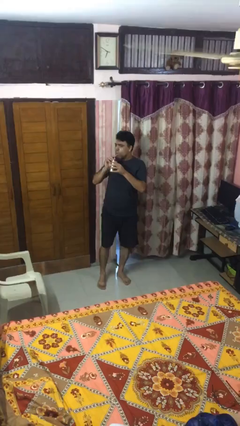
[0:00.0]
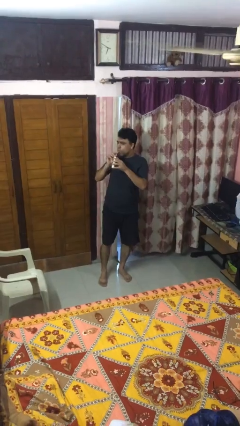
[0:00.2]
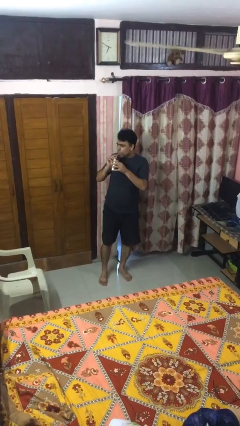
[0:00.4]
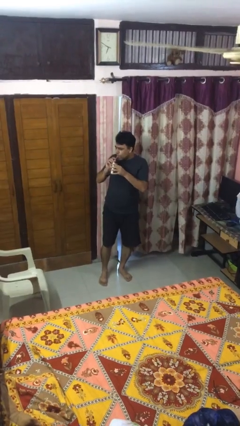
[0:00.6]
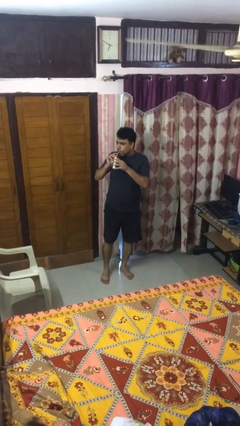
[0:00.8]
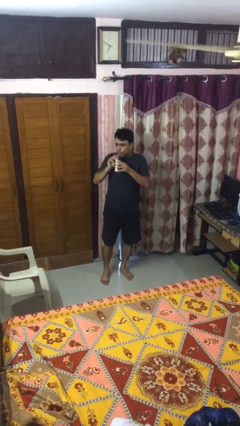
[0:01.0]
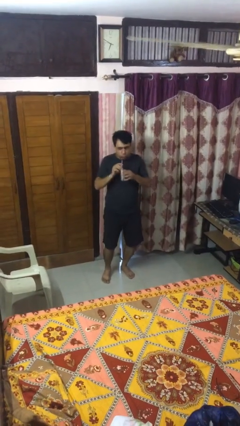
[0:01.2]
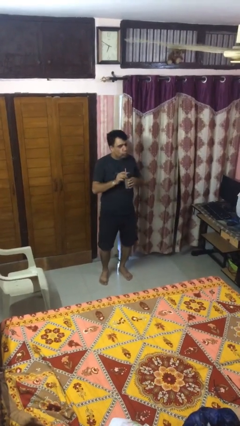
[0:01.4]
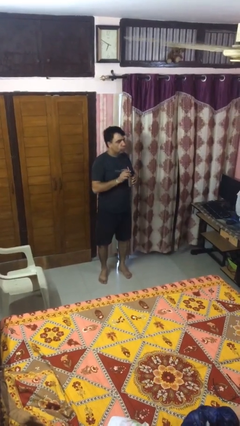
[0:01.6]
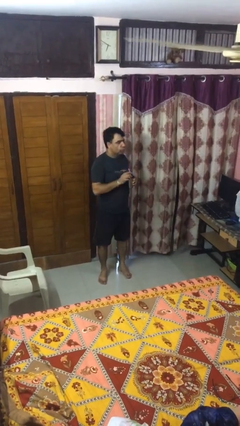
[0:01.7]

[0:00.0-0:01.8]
person drinks from straw

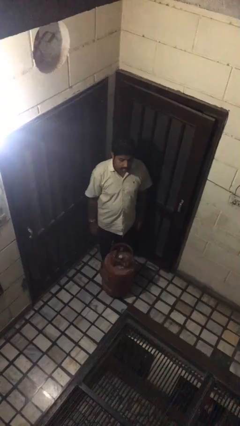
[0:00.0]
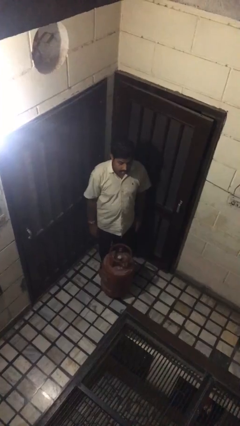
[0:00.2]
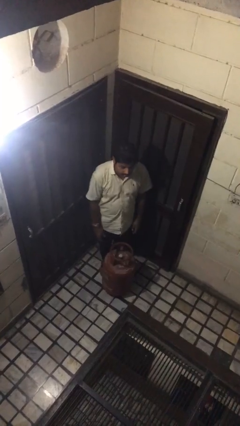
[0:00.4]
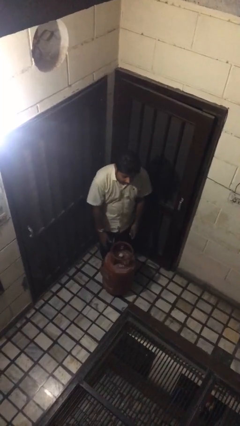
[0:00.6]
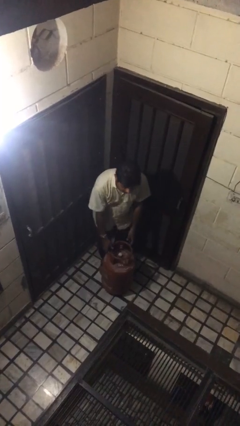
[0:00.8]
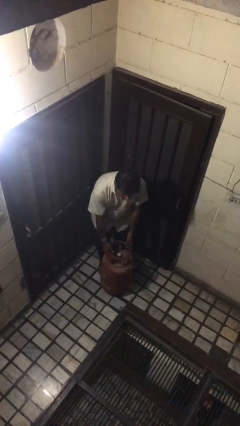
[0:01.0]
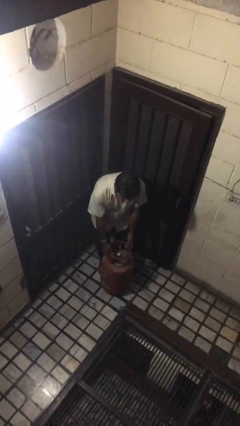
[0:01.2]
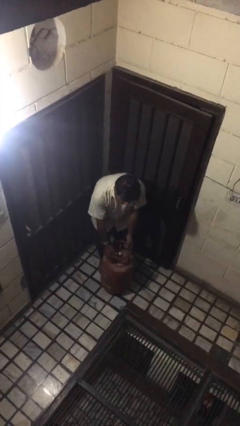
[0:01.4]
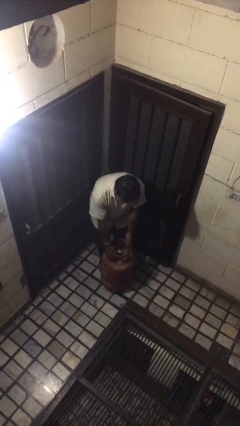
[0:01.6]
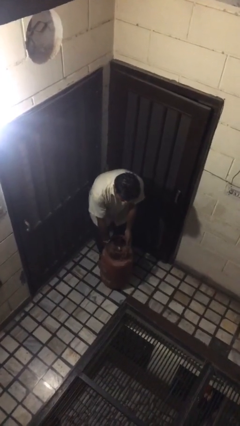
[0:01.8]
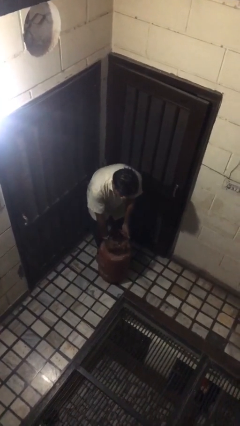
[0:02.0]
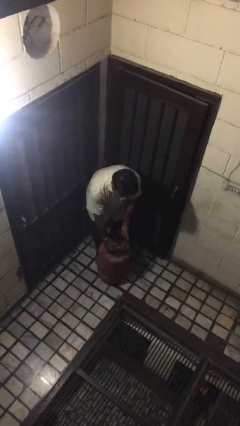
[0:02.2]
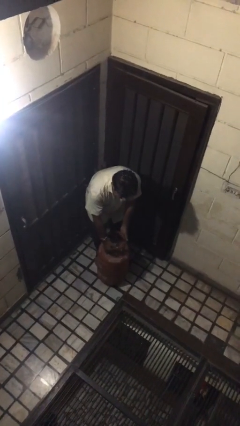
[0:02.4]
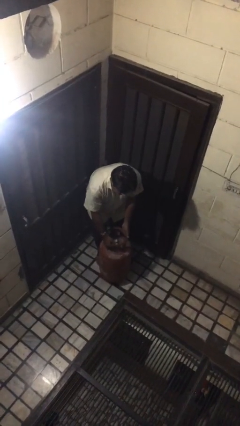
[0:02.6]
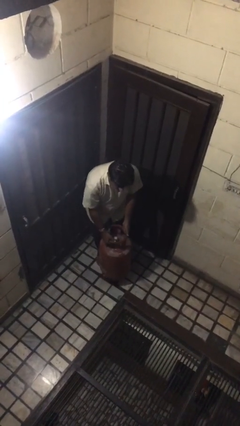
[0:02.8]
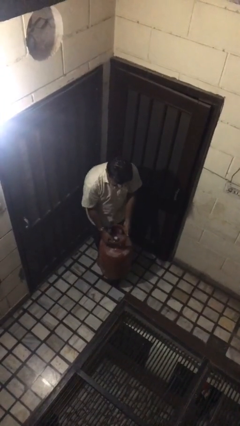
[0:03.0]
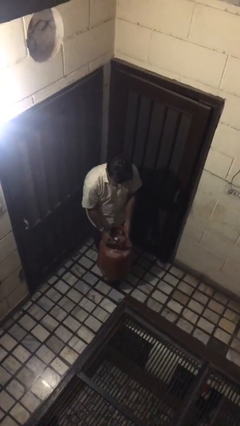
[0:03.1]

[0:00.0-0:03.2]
person picks up object from floor

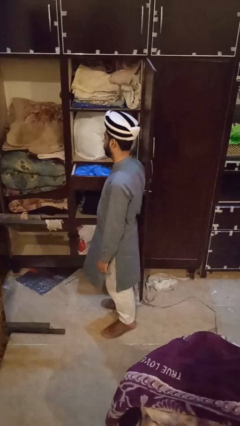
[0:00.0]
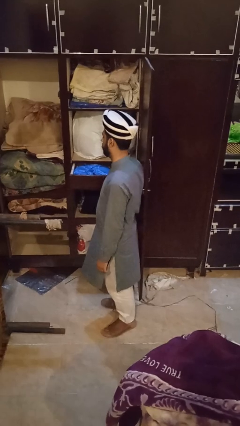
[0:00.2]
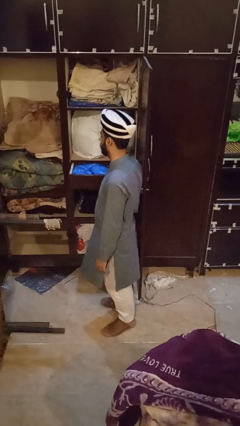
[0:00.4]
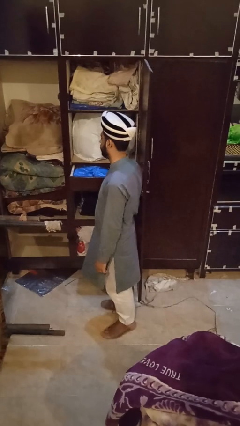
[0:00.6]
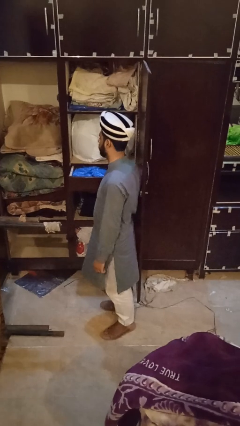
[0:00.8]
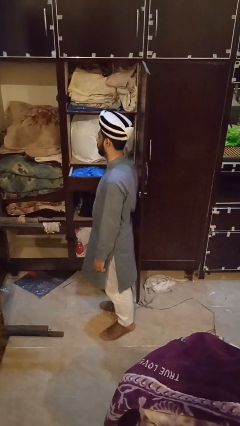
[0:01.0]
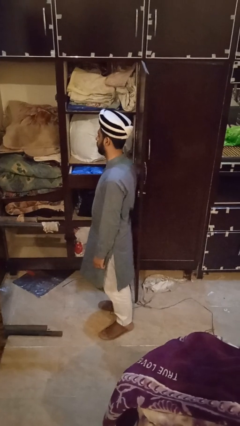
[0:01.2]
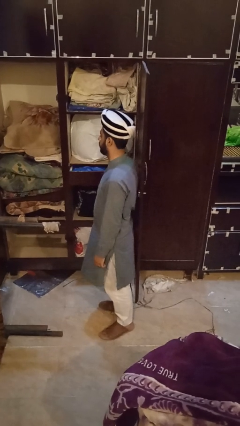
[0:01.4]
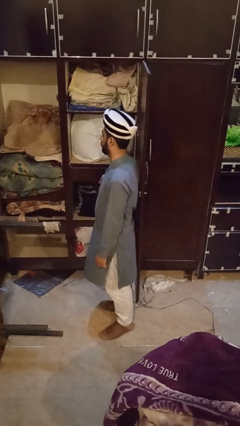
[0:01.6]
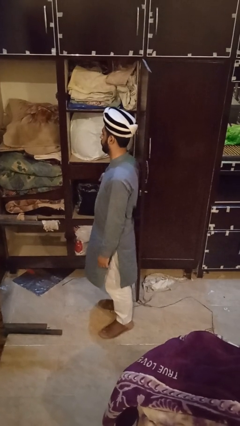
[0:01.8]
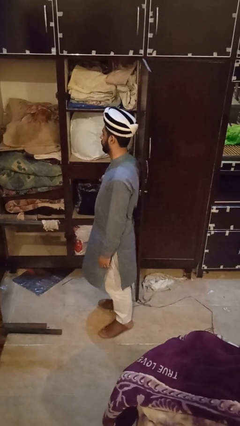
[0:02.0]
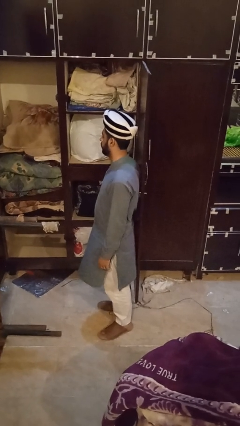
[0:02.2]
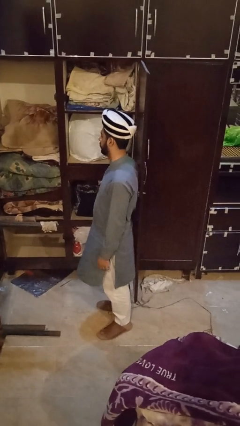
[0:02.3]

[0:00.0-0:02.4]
person closes dresser drawer

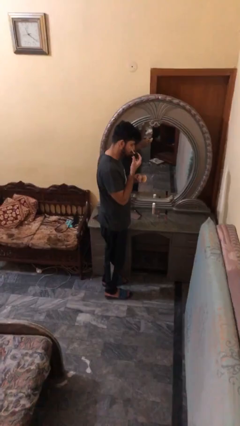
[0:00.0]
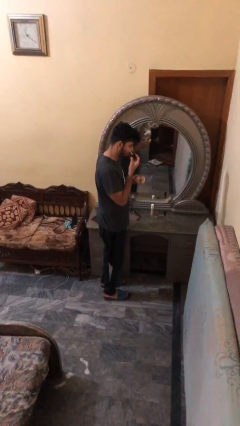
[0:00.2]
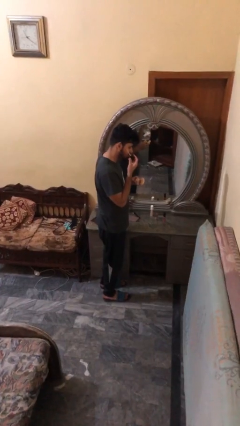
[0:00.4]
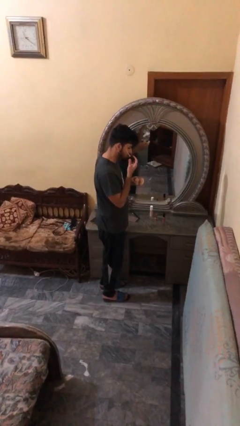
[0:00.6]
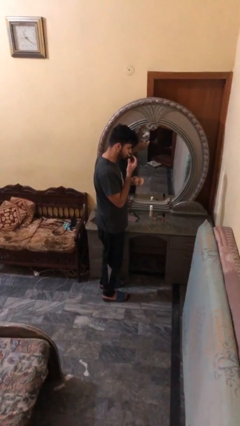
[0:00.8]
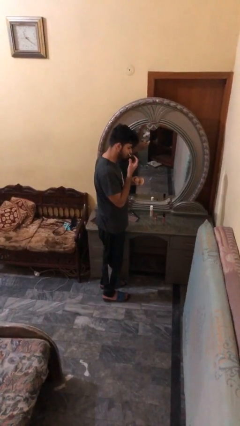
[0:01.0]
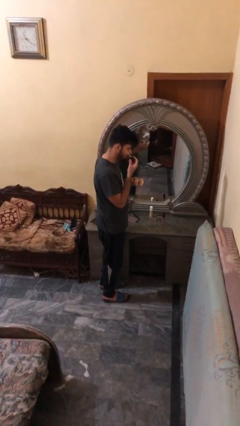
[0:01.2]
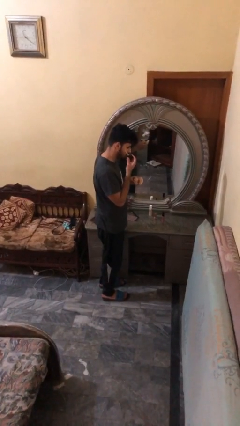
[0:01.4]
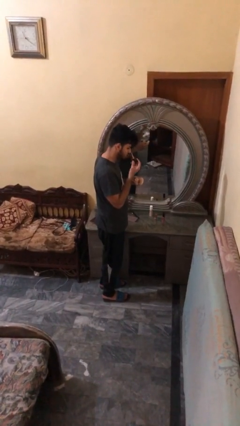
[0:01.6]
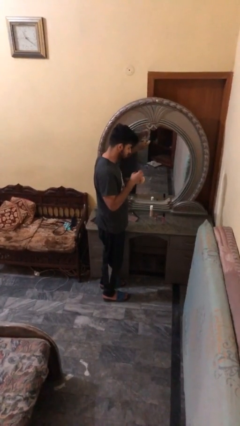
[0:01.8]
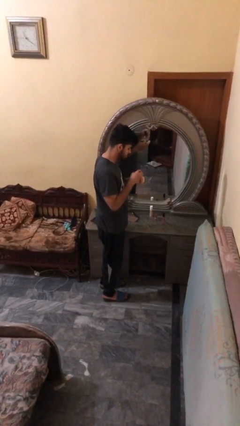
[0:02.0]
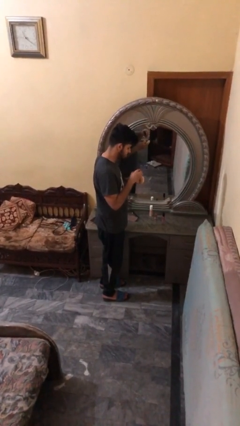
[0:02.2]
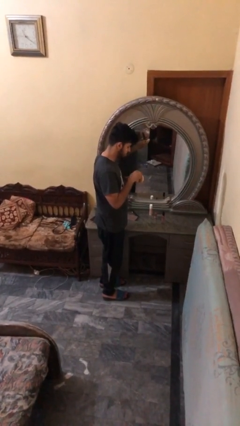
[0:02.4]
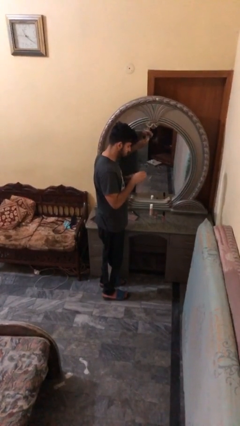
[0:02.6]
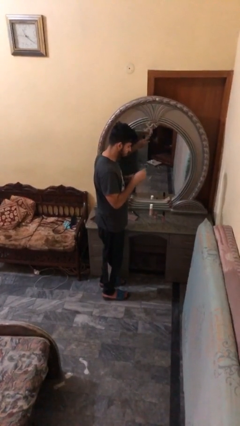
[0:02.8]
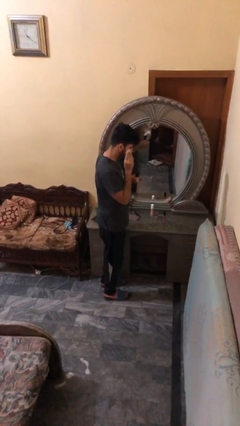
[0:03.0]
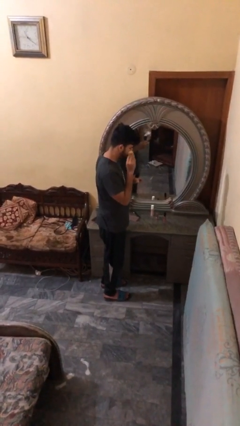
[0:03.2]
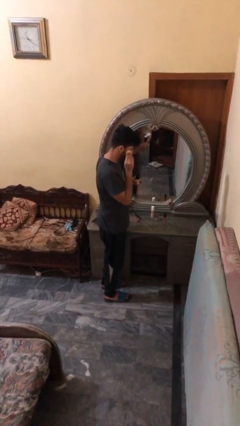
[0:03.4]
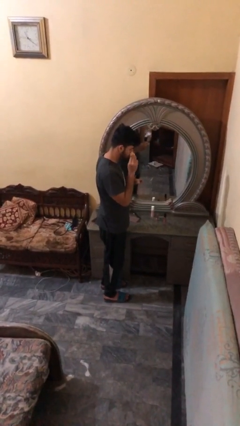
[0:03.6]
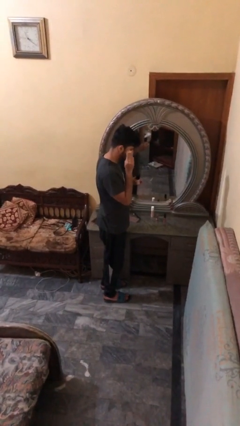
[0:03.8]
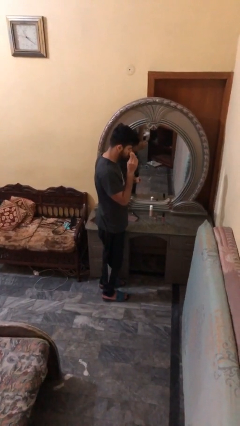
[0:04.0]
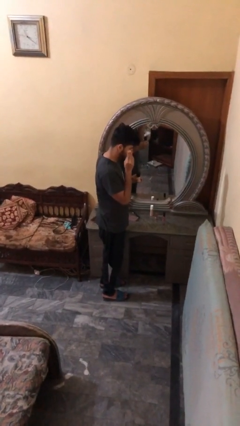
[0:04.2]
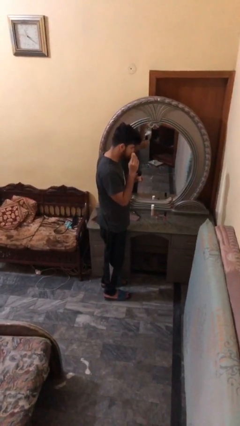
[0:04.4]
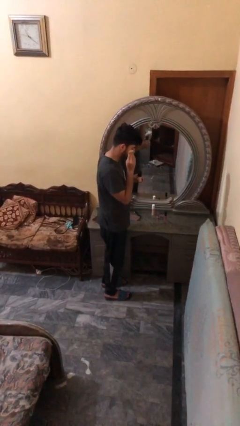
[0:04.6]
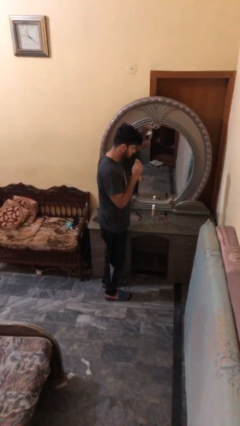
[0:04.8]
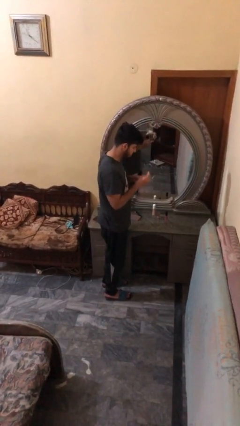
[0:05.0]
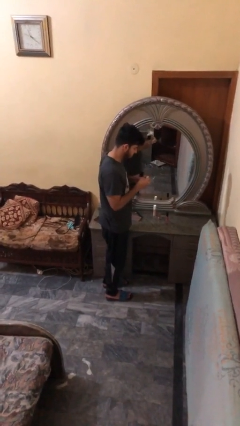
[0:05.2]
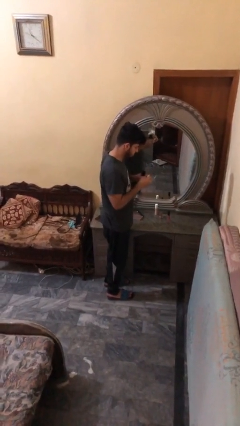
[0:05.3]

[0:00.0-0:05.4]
person applies foundation makeup

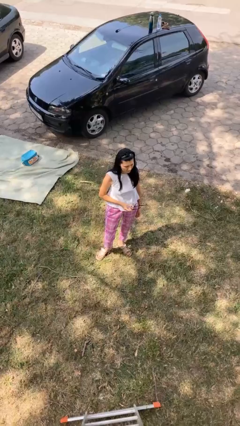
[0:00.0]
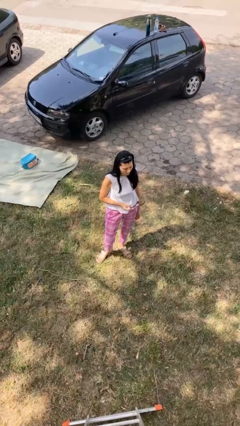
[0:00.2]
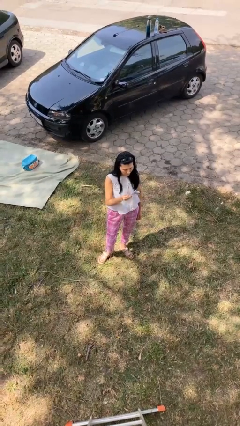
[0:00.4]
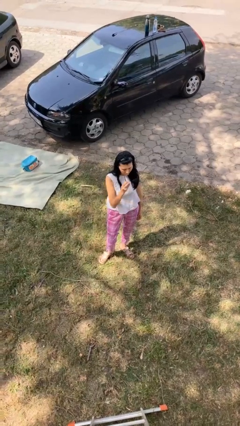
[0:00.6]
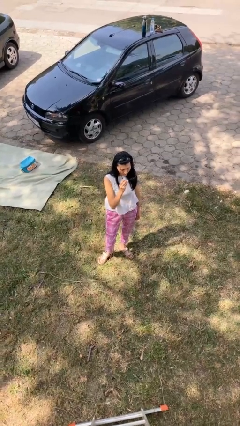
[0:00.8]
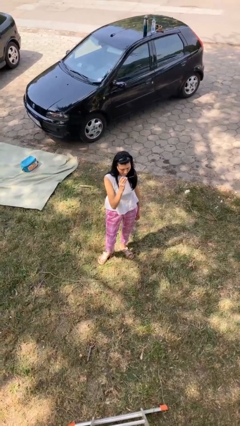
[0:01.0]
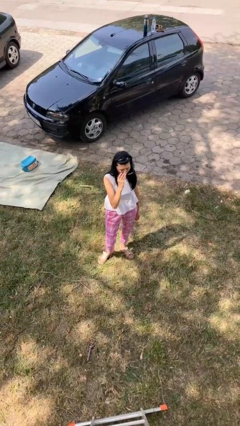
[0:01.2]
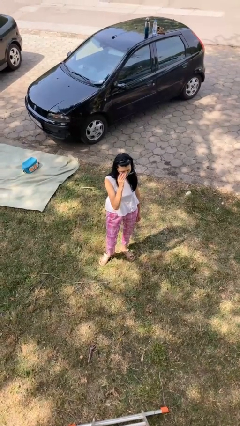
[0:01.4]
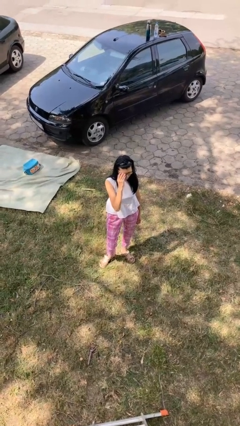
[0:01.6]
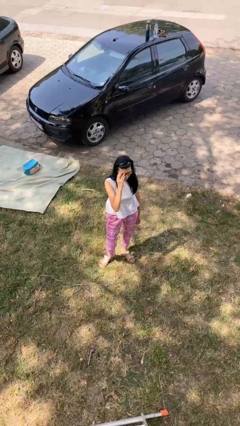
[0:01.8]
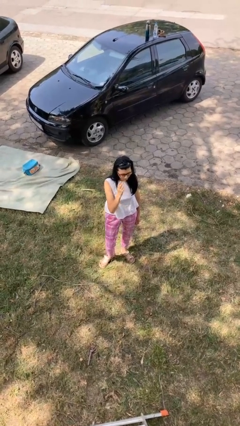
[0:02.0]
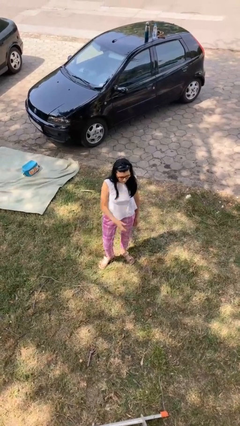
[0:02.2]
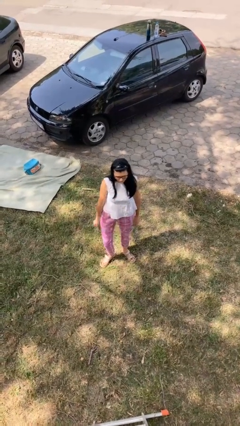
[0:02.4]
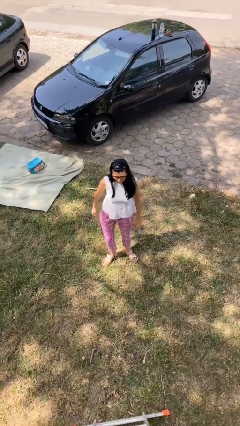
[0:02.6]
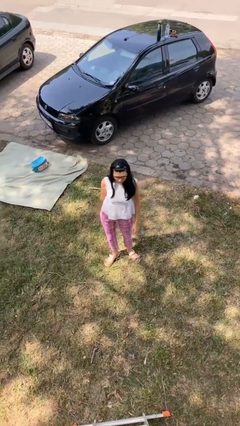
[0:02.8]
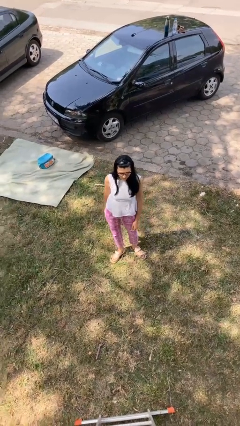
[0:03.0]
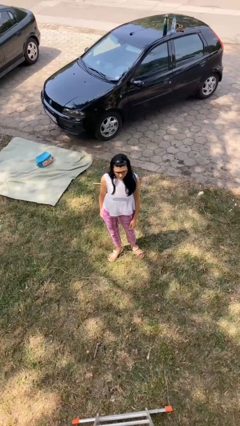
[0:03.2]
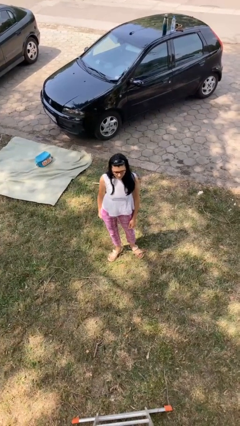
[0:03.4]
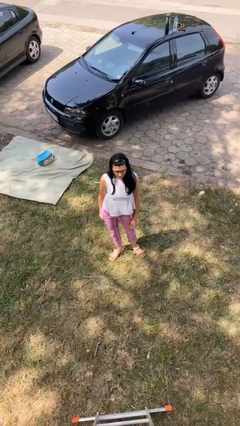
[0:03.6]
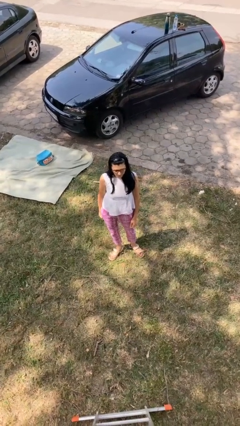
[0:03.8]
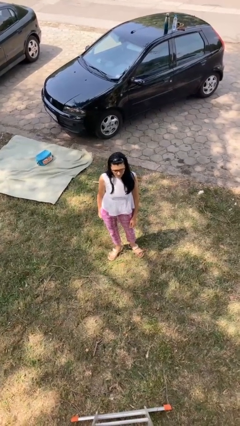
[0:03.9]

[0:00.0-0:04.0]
person puts on glasses

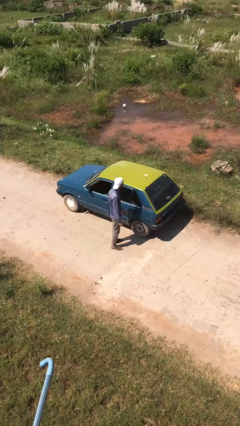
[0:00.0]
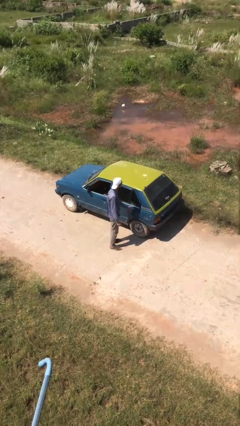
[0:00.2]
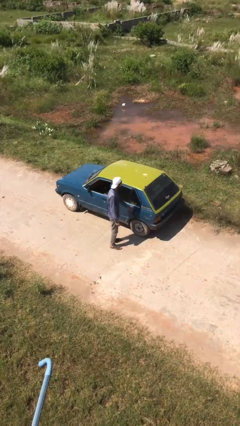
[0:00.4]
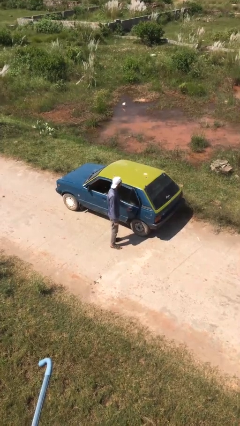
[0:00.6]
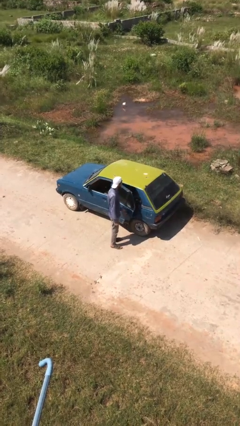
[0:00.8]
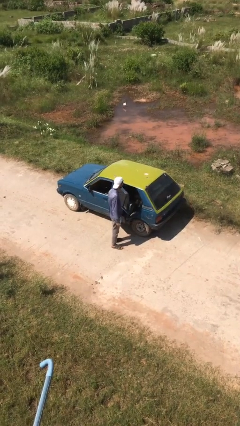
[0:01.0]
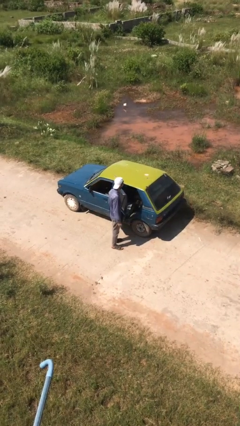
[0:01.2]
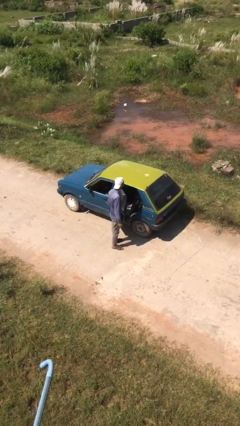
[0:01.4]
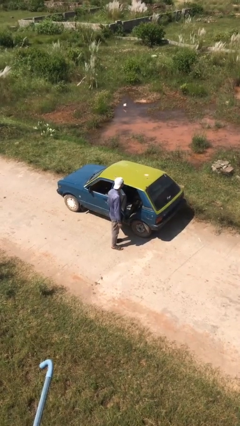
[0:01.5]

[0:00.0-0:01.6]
person opens car door
